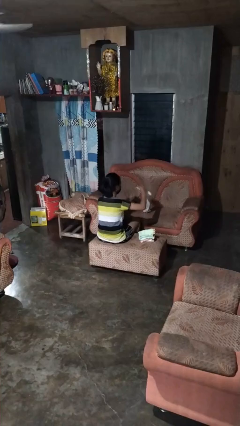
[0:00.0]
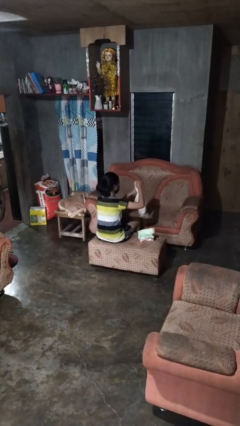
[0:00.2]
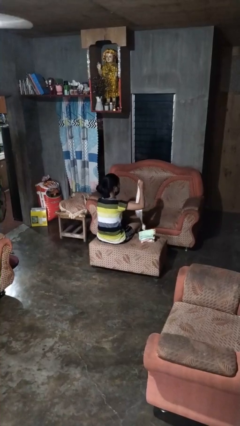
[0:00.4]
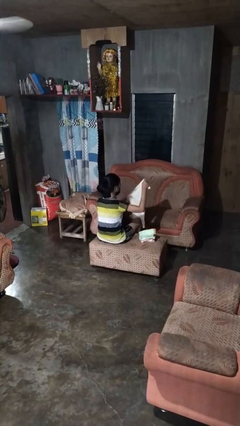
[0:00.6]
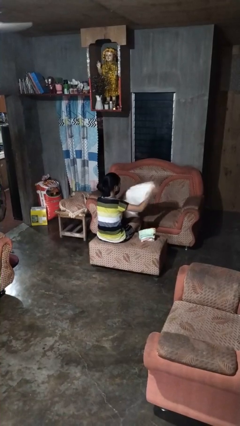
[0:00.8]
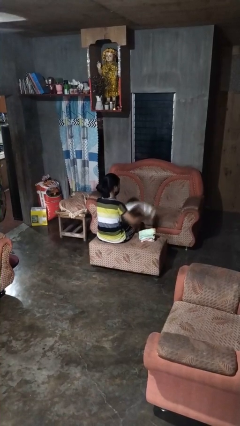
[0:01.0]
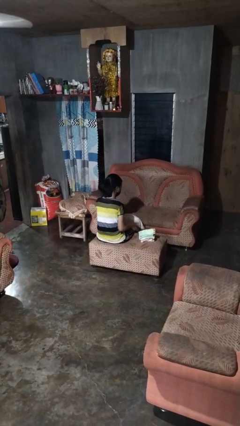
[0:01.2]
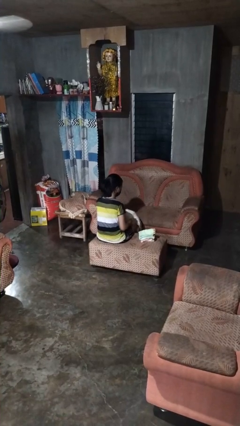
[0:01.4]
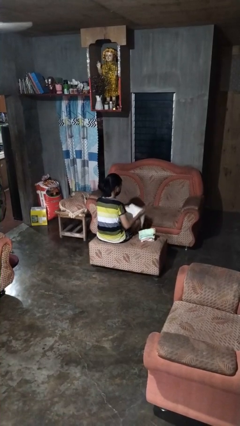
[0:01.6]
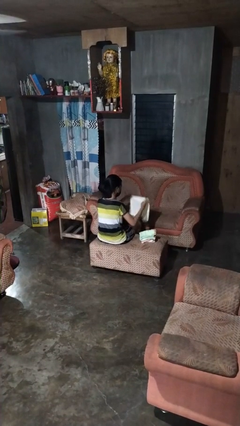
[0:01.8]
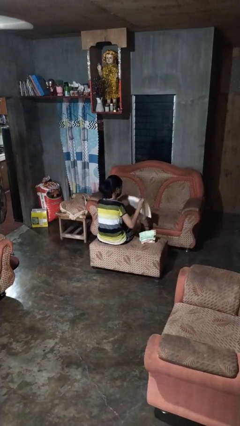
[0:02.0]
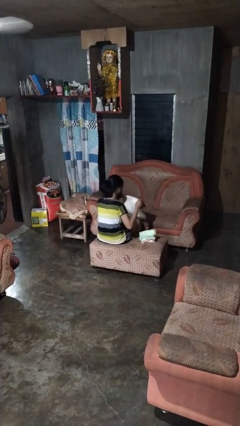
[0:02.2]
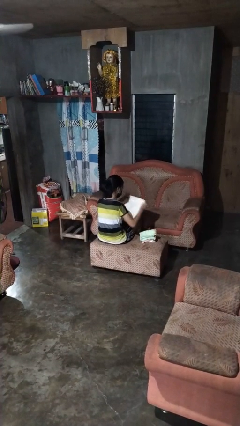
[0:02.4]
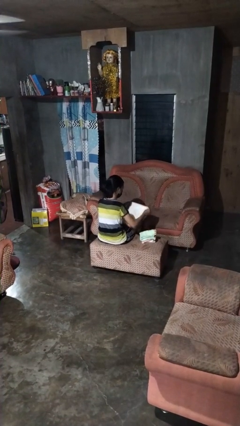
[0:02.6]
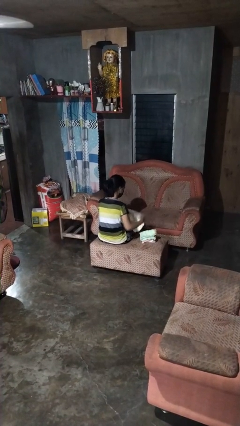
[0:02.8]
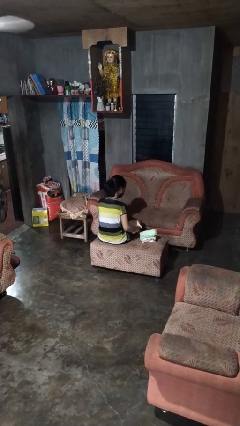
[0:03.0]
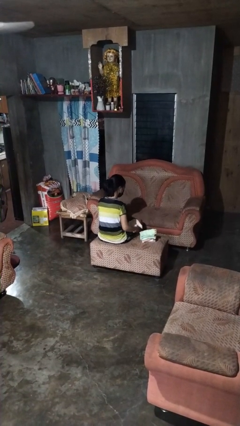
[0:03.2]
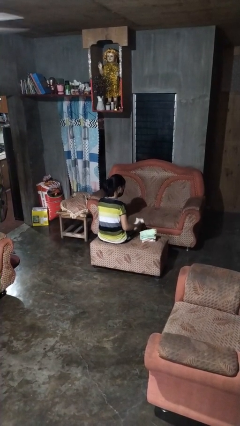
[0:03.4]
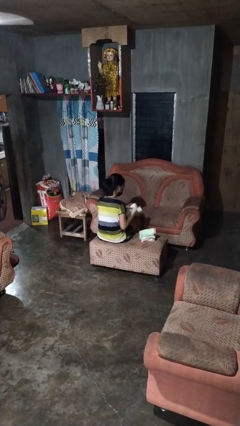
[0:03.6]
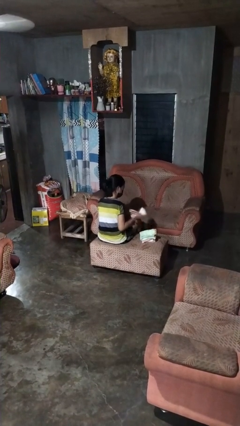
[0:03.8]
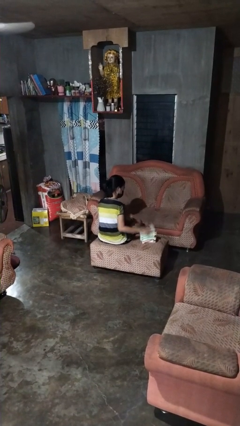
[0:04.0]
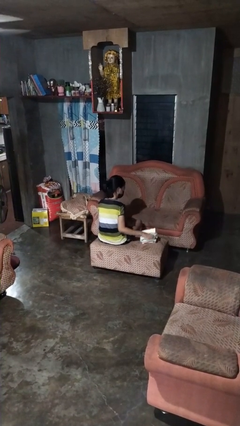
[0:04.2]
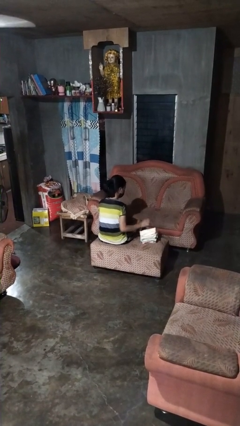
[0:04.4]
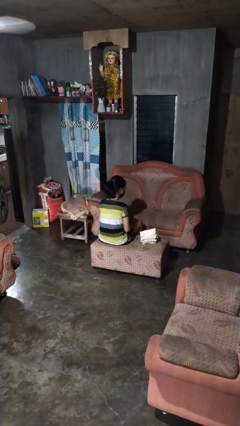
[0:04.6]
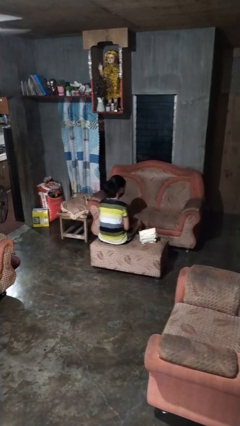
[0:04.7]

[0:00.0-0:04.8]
person folds towel

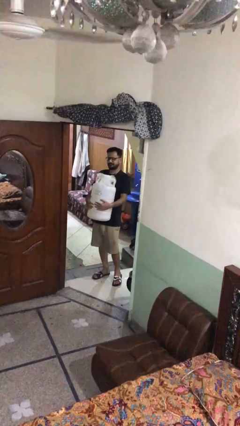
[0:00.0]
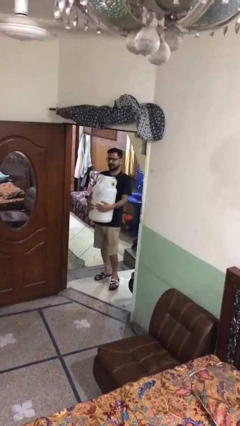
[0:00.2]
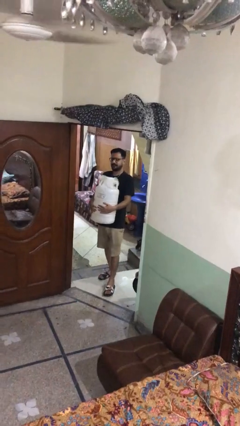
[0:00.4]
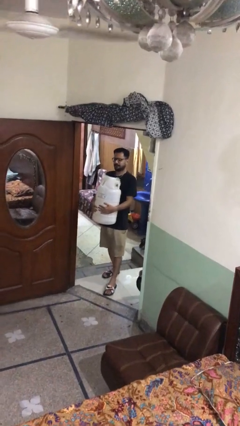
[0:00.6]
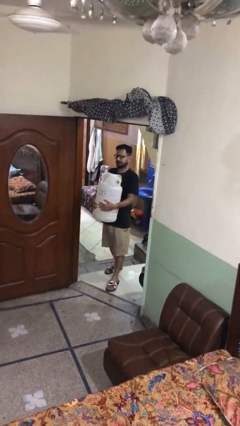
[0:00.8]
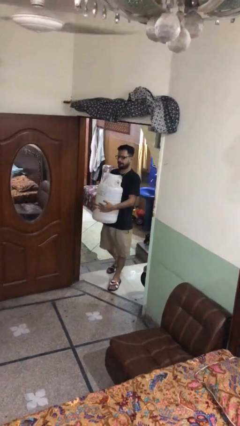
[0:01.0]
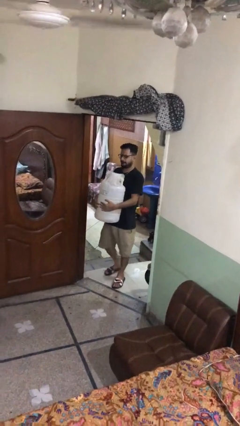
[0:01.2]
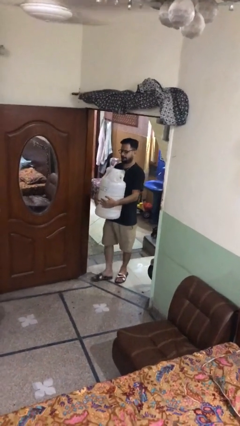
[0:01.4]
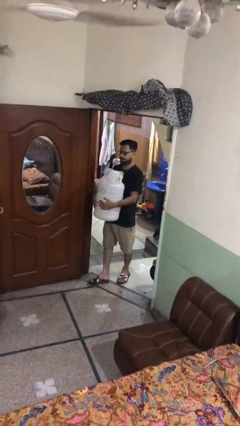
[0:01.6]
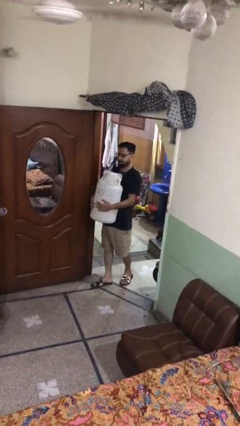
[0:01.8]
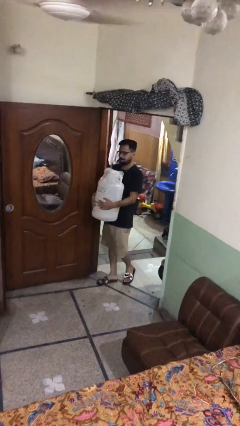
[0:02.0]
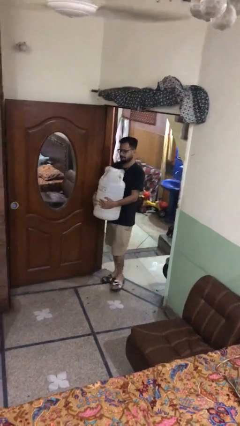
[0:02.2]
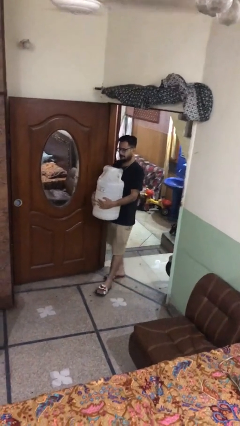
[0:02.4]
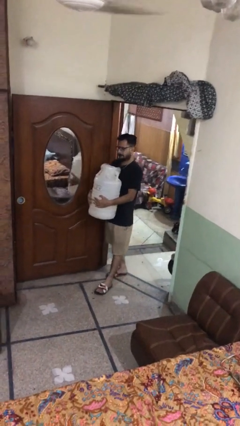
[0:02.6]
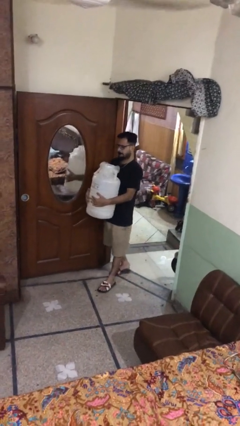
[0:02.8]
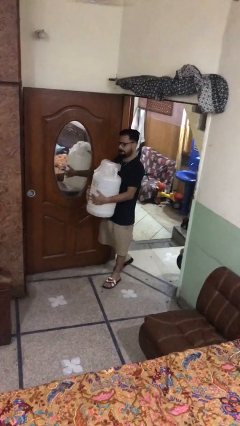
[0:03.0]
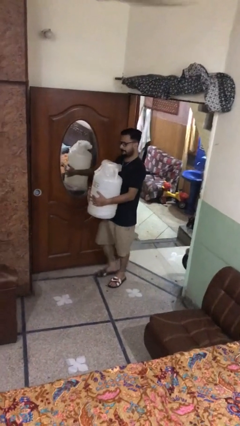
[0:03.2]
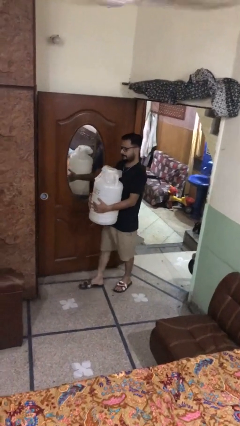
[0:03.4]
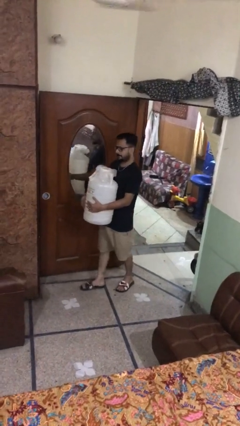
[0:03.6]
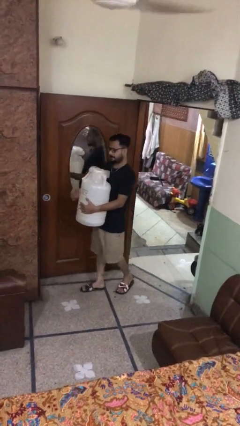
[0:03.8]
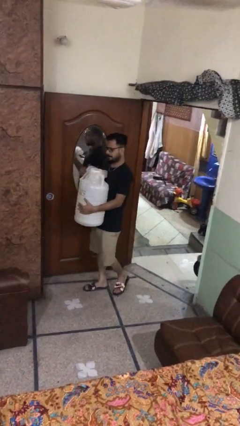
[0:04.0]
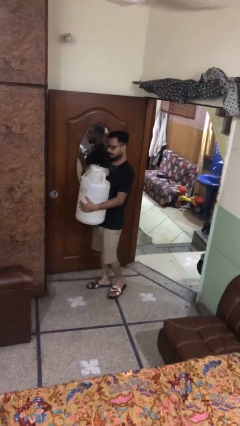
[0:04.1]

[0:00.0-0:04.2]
person carries heavy object

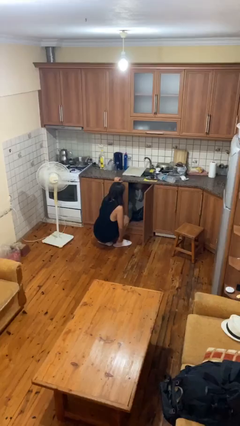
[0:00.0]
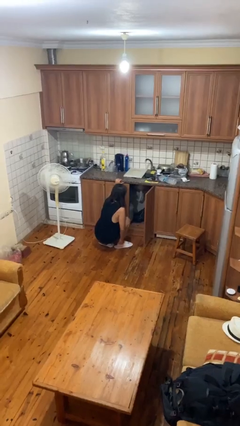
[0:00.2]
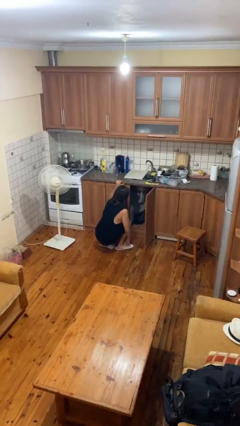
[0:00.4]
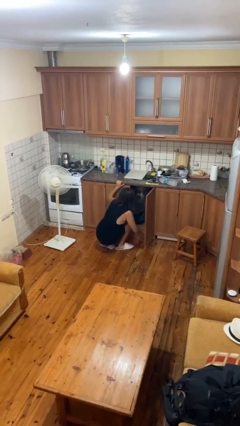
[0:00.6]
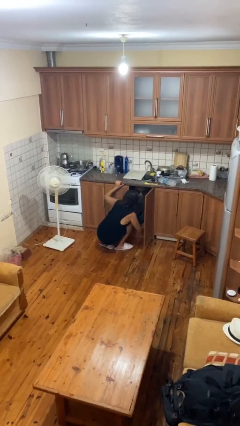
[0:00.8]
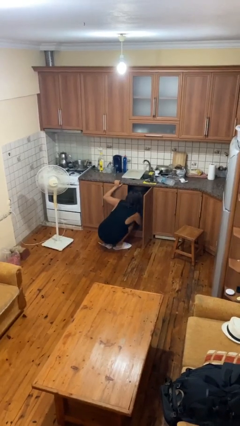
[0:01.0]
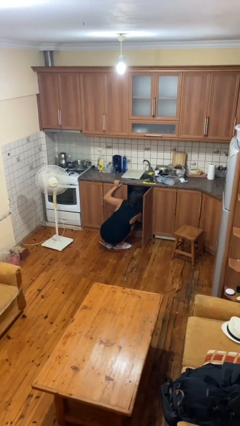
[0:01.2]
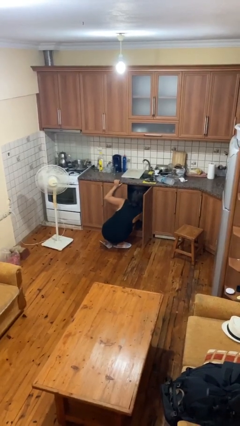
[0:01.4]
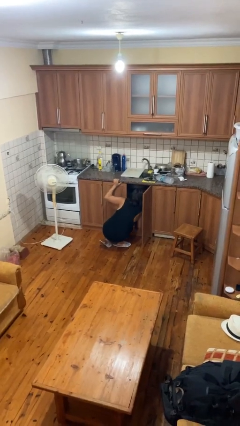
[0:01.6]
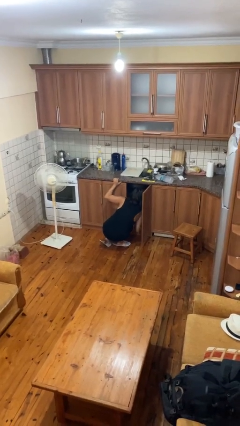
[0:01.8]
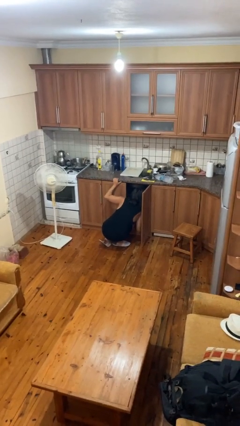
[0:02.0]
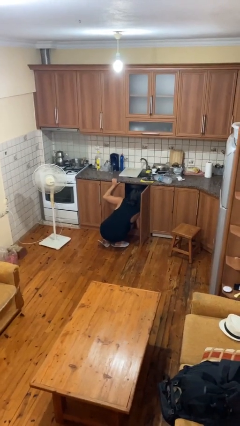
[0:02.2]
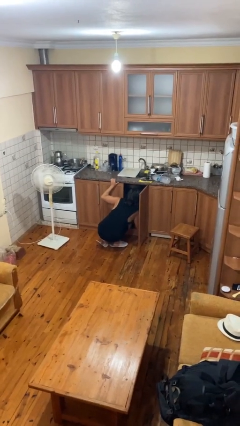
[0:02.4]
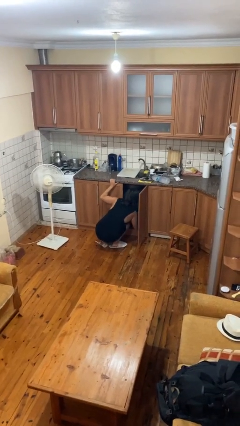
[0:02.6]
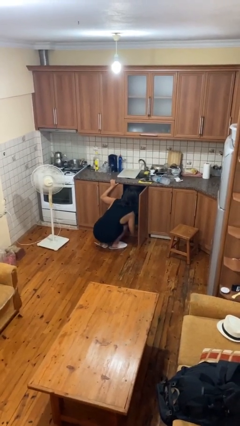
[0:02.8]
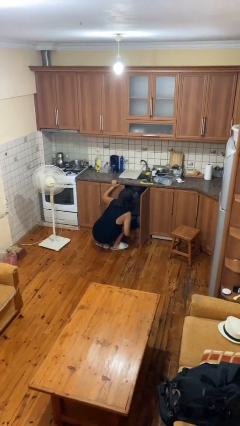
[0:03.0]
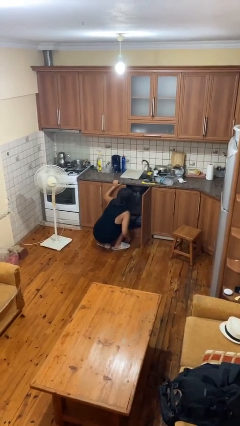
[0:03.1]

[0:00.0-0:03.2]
person searches in cabinet

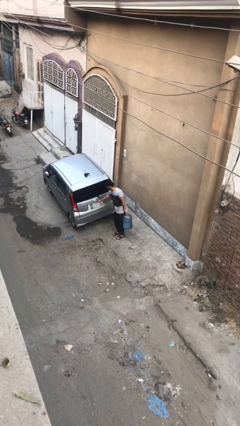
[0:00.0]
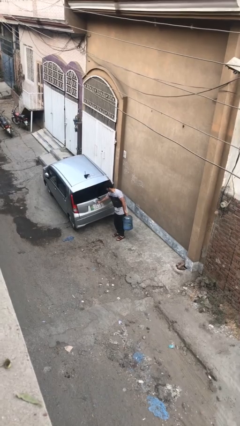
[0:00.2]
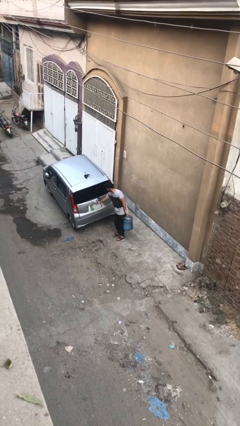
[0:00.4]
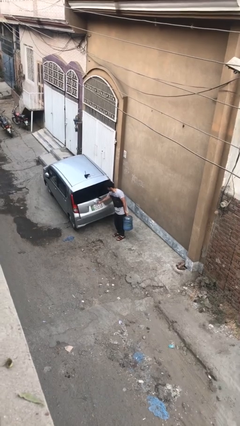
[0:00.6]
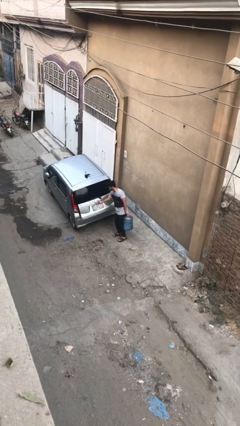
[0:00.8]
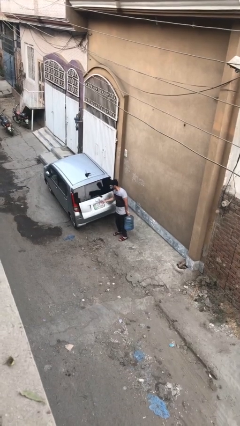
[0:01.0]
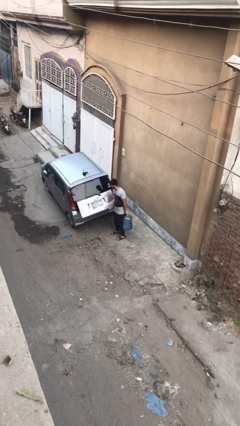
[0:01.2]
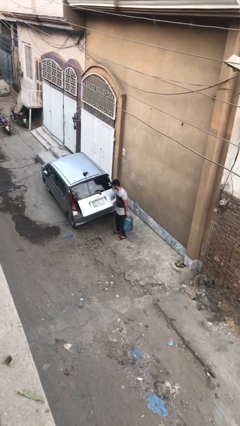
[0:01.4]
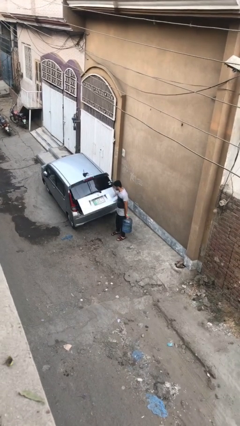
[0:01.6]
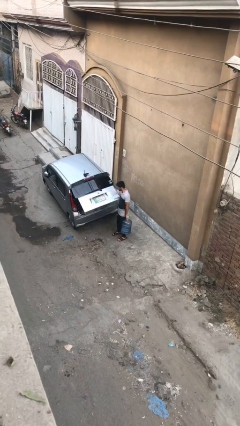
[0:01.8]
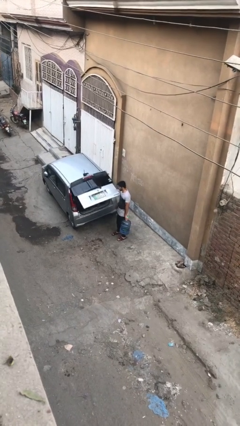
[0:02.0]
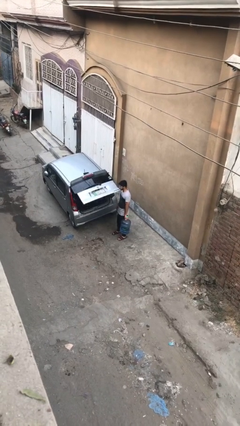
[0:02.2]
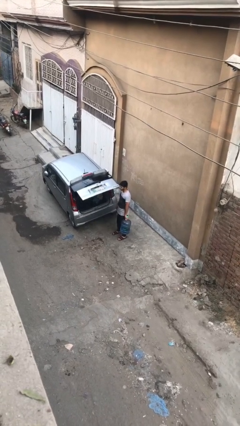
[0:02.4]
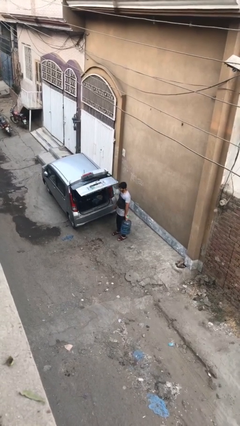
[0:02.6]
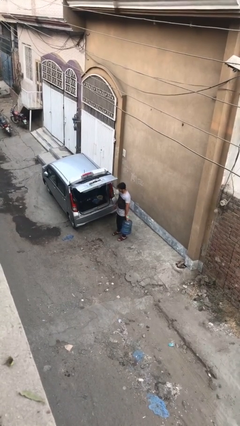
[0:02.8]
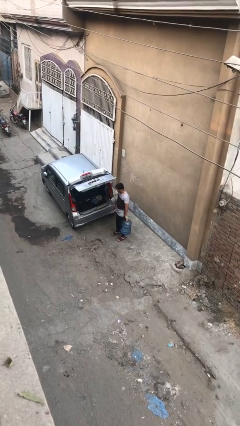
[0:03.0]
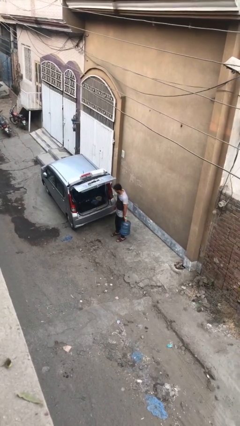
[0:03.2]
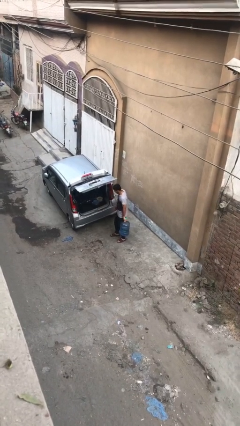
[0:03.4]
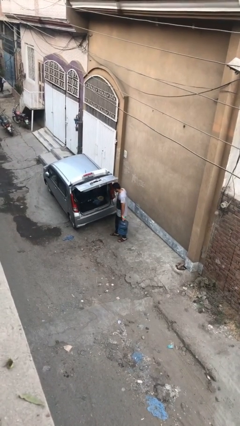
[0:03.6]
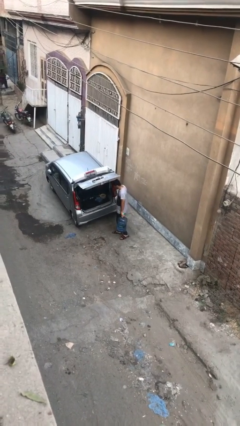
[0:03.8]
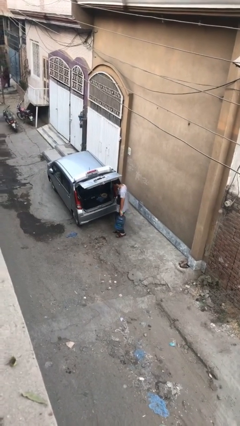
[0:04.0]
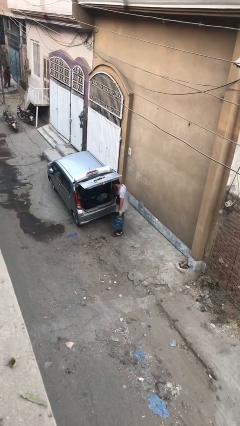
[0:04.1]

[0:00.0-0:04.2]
person opens car trunk

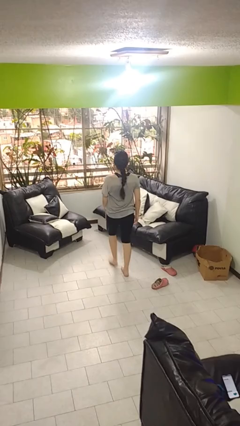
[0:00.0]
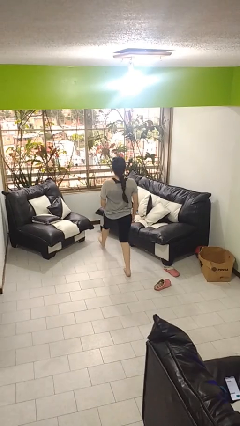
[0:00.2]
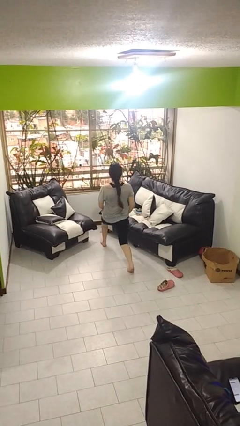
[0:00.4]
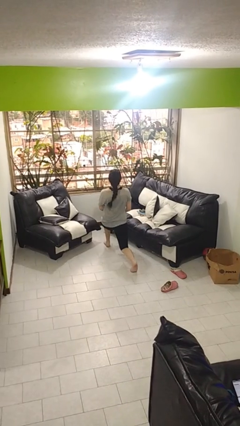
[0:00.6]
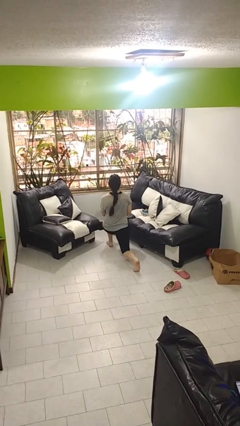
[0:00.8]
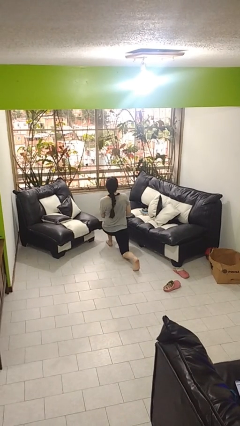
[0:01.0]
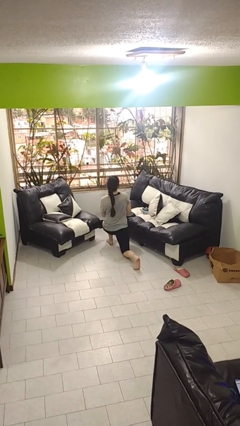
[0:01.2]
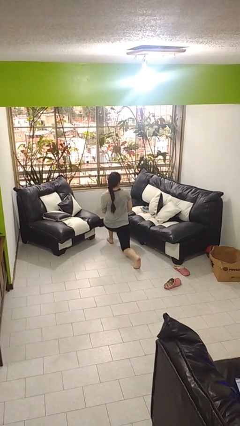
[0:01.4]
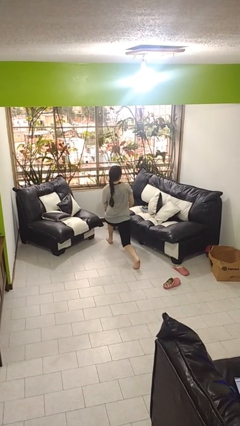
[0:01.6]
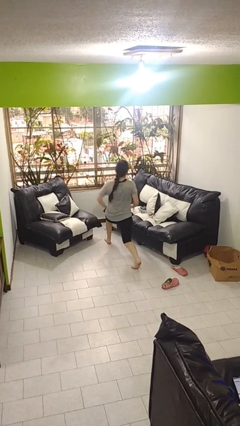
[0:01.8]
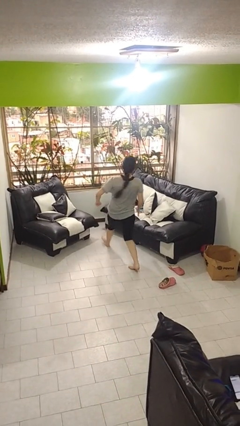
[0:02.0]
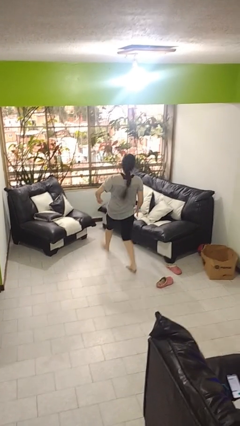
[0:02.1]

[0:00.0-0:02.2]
person exercises with lunges
